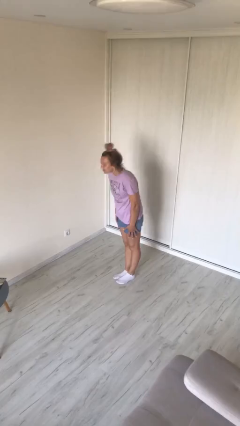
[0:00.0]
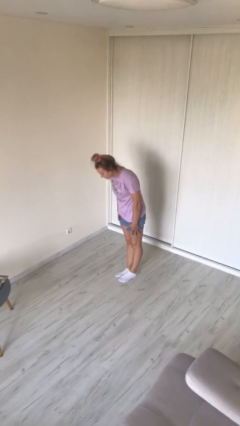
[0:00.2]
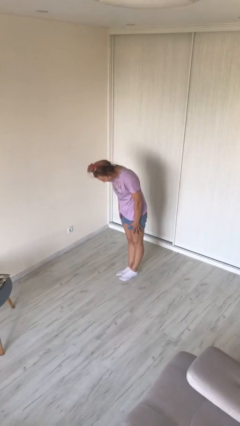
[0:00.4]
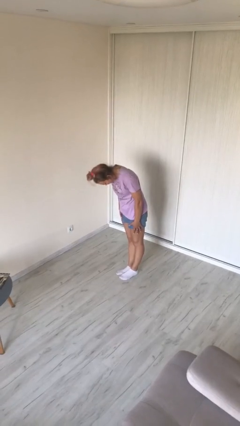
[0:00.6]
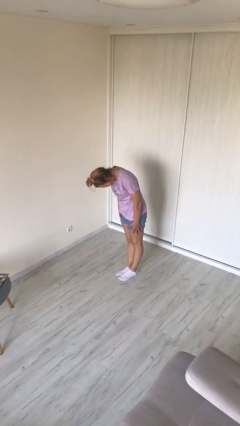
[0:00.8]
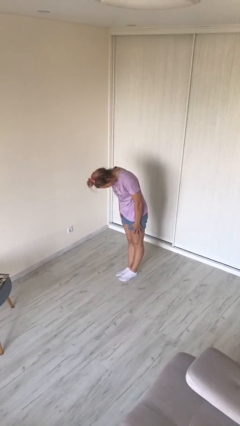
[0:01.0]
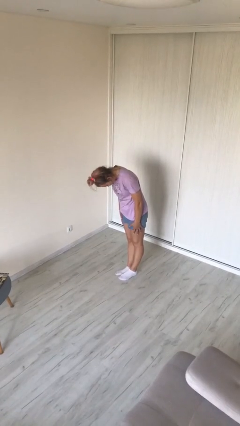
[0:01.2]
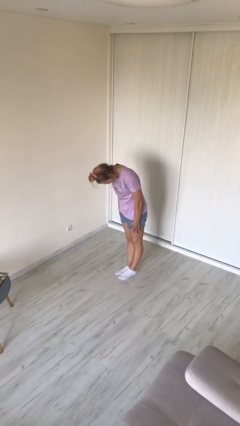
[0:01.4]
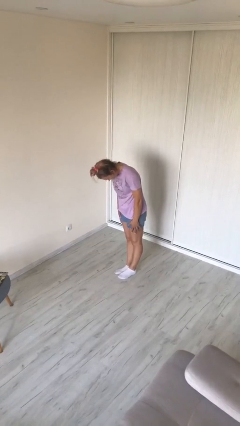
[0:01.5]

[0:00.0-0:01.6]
person bows

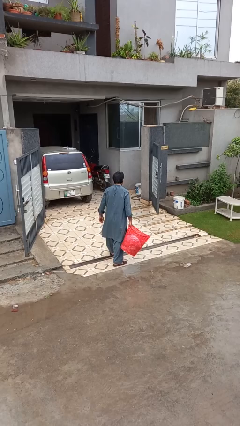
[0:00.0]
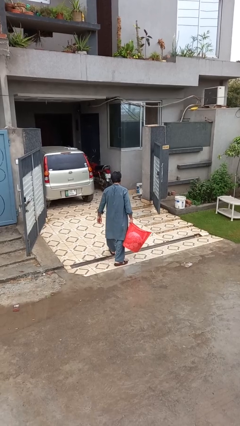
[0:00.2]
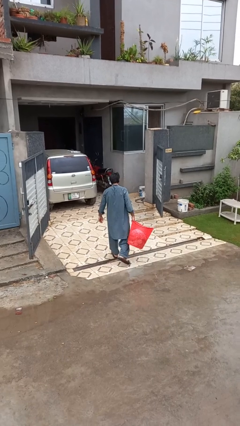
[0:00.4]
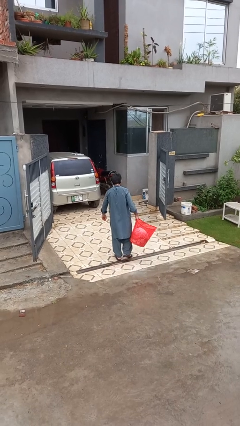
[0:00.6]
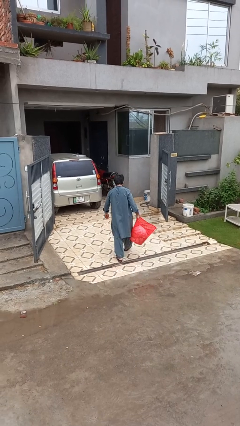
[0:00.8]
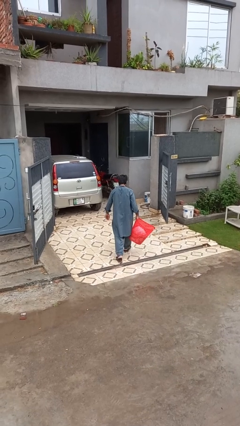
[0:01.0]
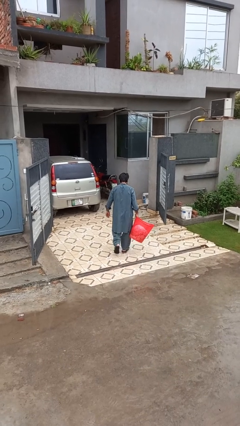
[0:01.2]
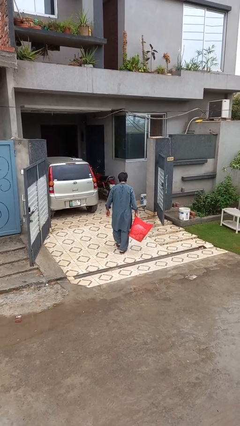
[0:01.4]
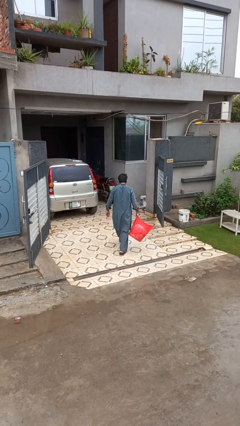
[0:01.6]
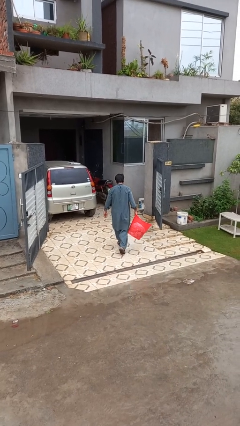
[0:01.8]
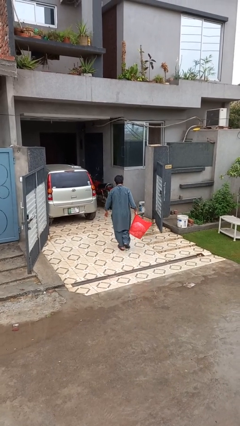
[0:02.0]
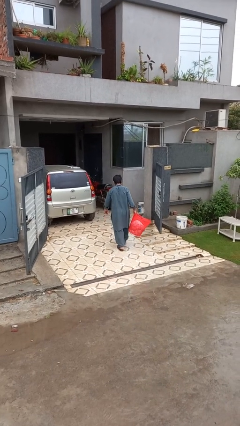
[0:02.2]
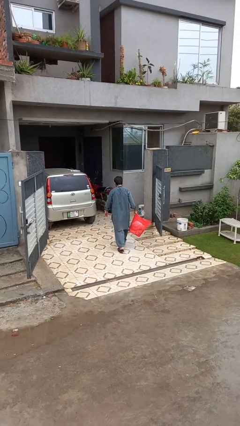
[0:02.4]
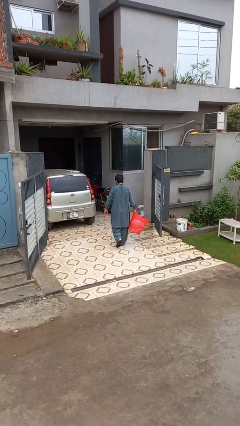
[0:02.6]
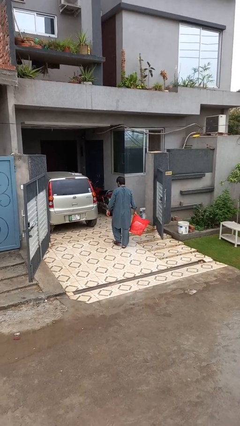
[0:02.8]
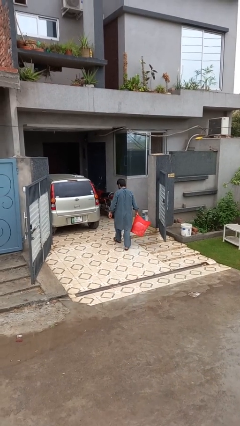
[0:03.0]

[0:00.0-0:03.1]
person carries laundry basket

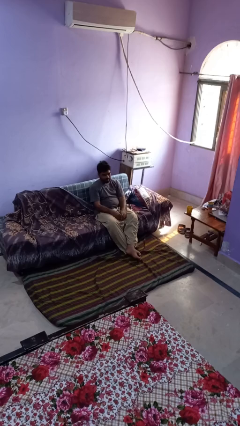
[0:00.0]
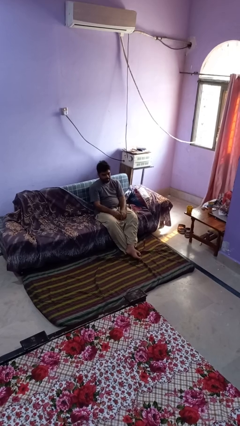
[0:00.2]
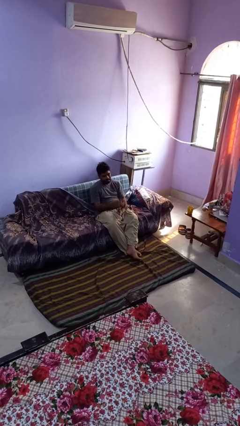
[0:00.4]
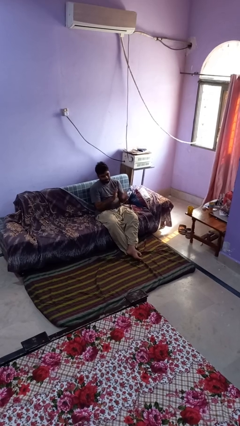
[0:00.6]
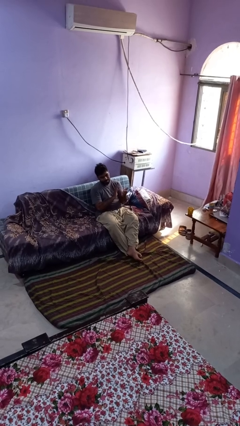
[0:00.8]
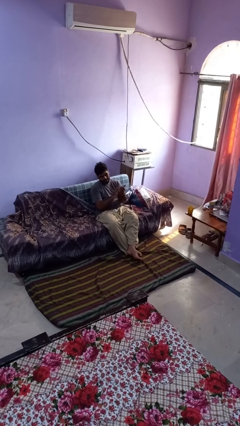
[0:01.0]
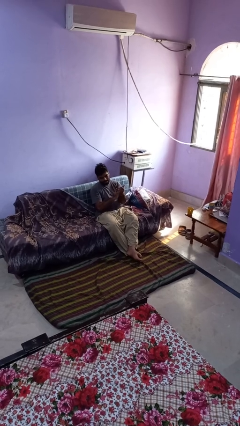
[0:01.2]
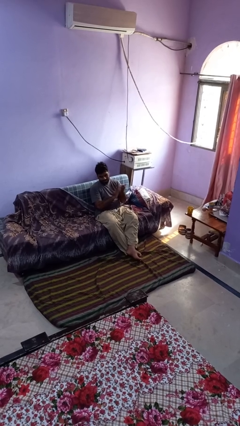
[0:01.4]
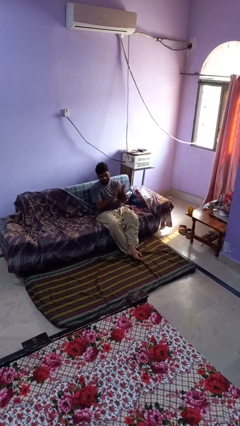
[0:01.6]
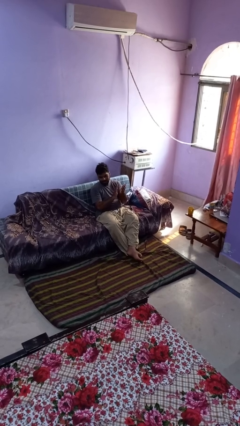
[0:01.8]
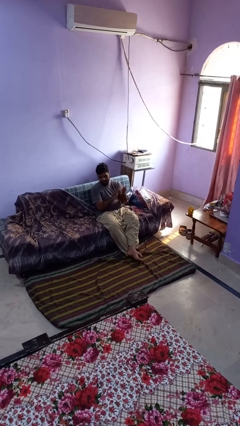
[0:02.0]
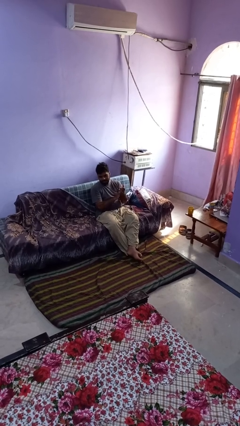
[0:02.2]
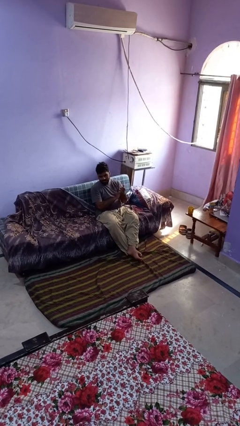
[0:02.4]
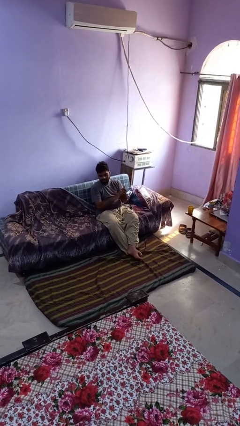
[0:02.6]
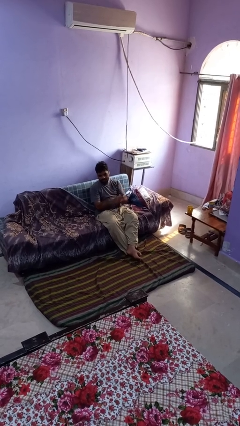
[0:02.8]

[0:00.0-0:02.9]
person claps hands

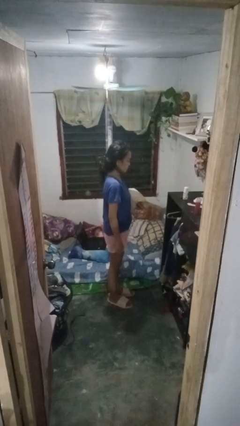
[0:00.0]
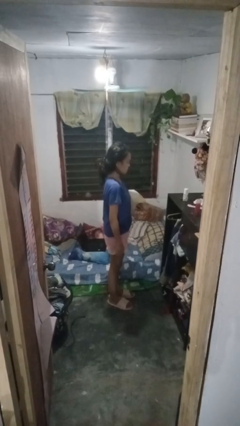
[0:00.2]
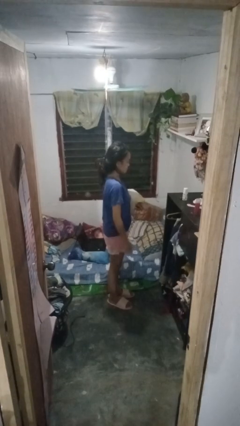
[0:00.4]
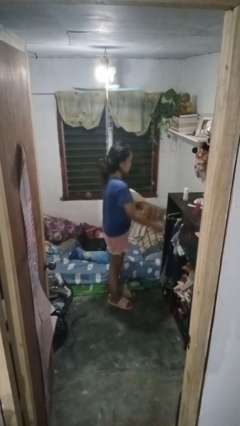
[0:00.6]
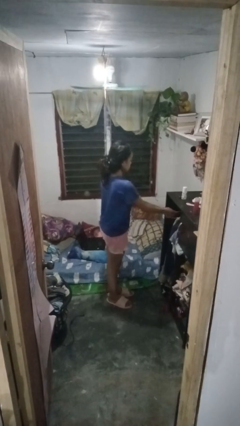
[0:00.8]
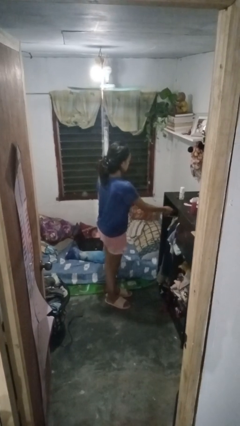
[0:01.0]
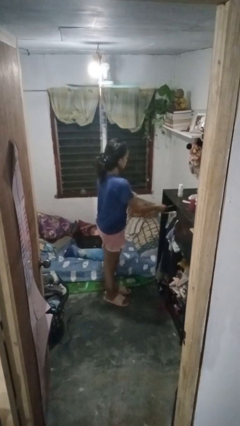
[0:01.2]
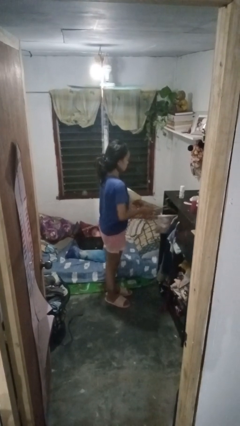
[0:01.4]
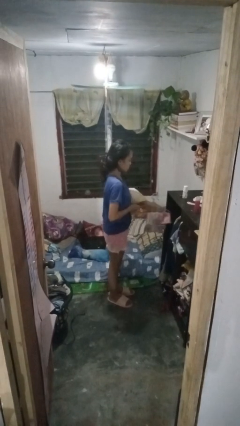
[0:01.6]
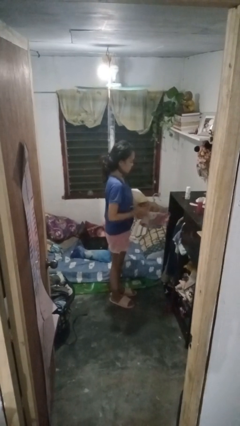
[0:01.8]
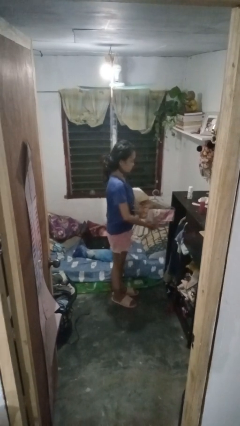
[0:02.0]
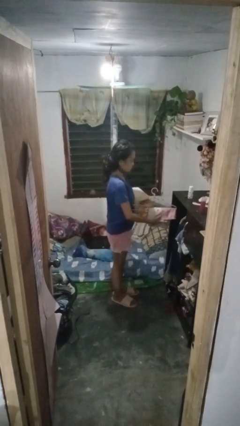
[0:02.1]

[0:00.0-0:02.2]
person takes clothes from closet

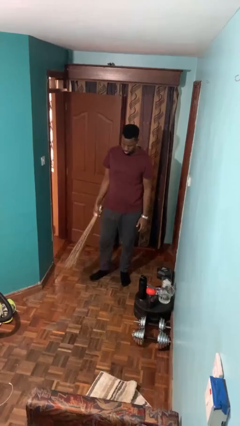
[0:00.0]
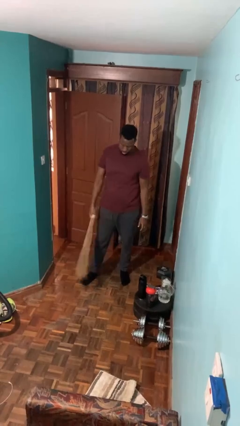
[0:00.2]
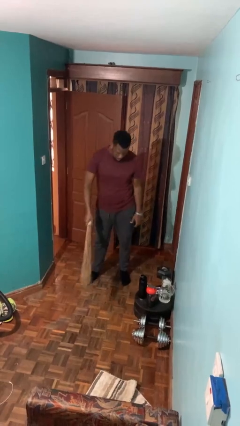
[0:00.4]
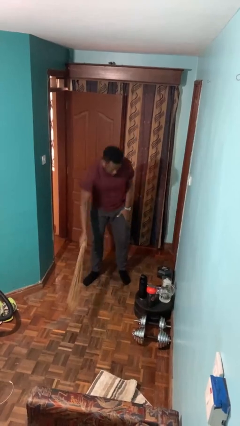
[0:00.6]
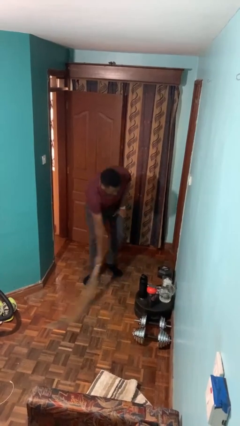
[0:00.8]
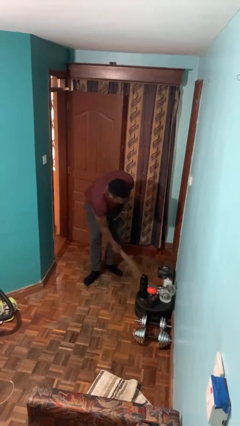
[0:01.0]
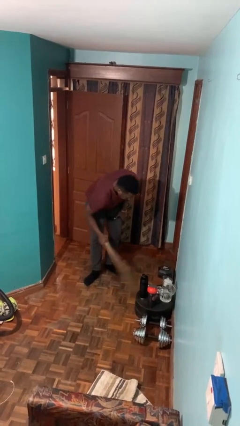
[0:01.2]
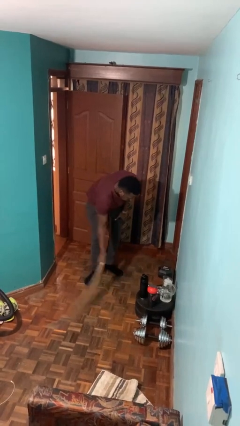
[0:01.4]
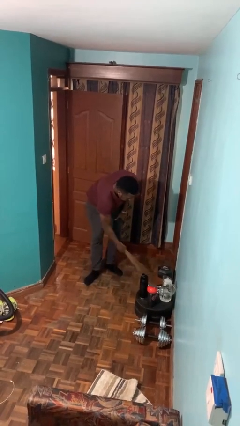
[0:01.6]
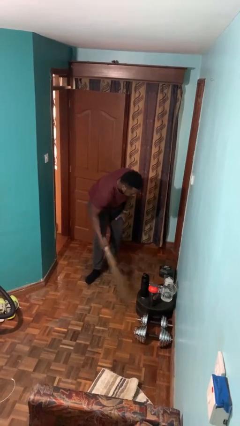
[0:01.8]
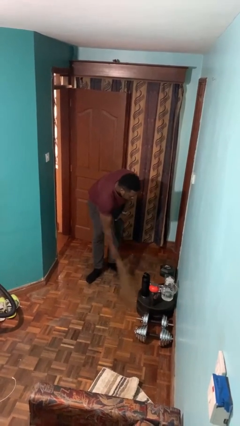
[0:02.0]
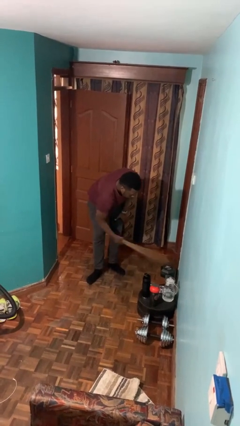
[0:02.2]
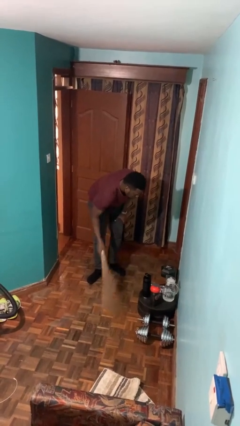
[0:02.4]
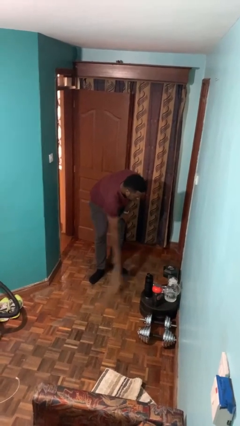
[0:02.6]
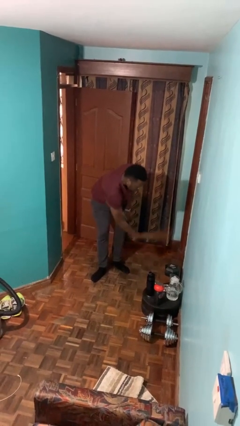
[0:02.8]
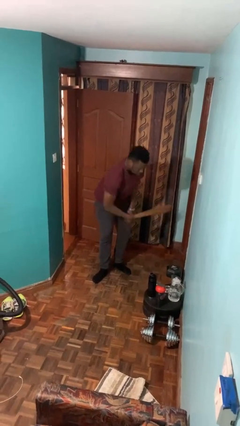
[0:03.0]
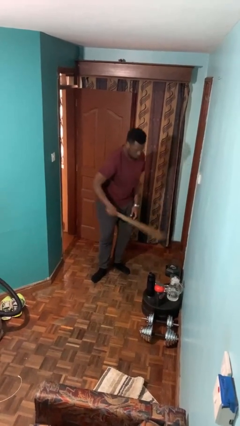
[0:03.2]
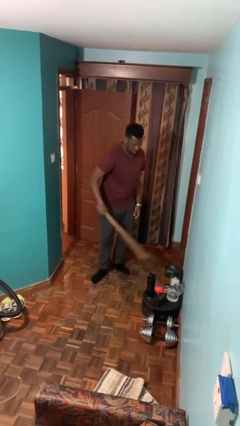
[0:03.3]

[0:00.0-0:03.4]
person sweeps floor

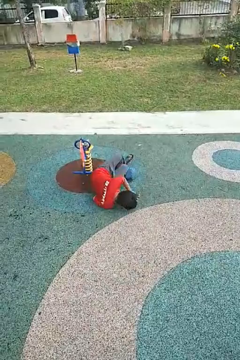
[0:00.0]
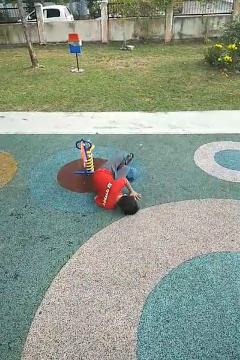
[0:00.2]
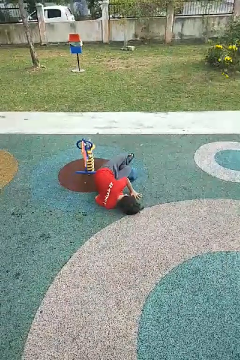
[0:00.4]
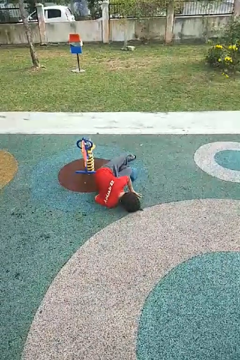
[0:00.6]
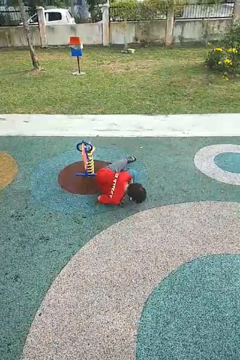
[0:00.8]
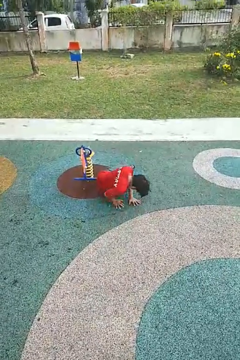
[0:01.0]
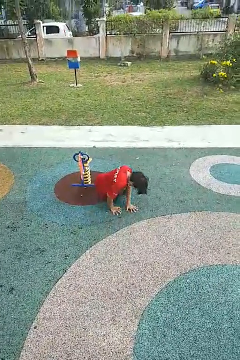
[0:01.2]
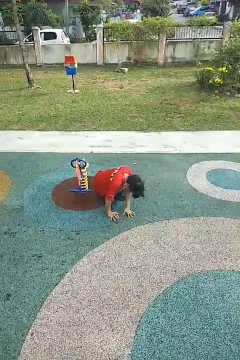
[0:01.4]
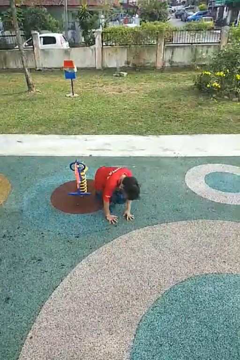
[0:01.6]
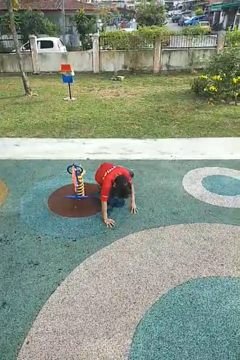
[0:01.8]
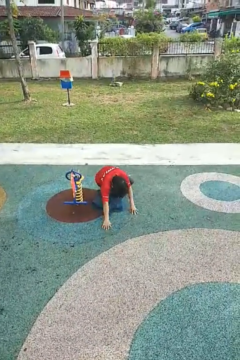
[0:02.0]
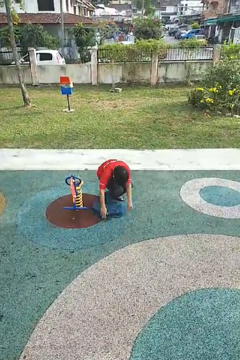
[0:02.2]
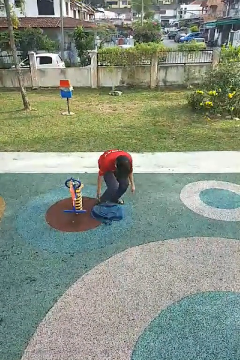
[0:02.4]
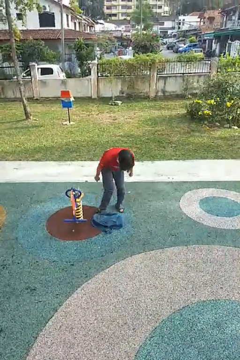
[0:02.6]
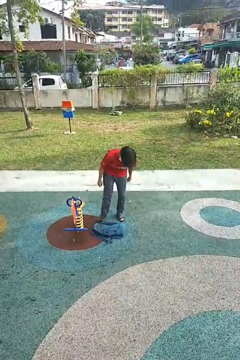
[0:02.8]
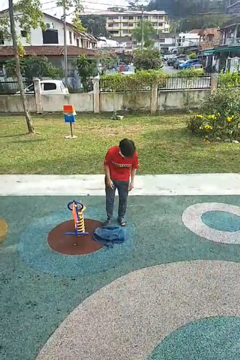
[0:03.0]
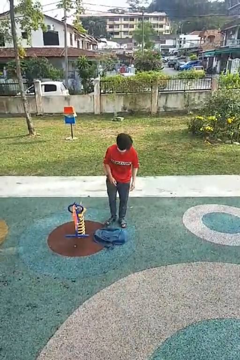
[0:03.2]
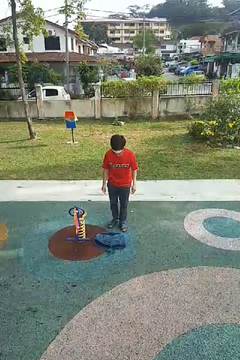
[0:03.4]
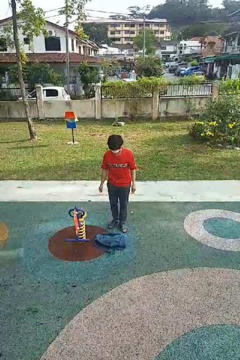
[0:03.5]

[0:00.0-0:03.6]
person stands up from floor

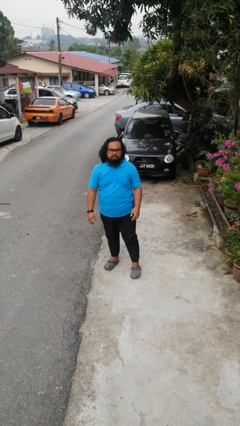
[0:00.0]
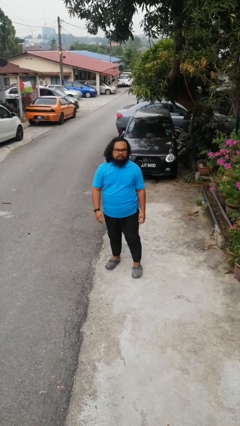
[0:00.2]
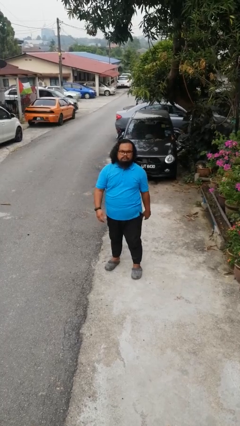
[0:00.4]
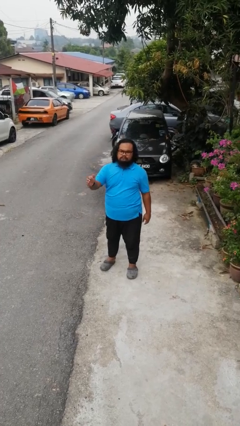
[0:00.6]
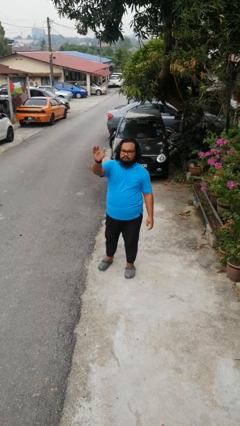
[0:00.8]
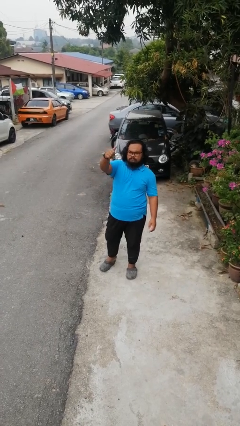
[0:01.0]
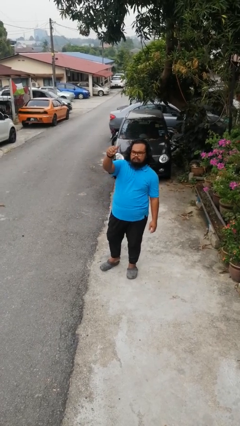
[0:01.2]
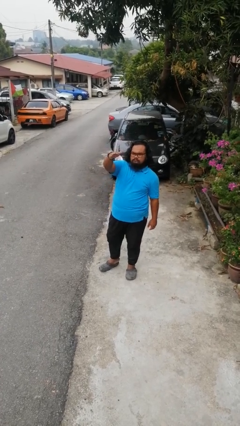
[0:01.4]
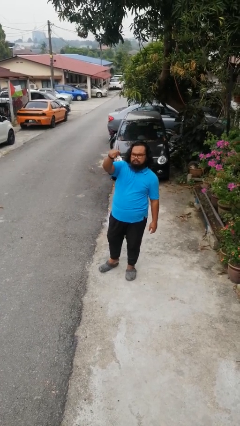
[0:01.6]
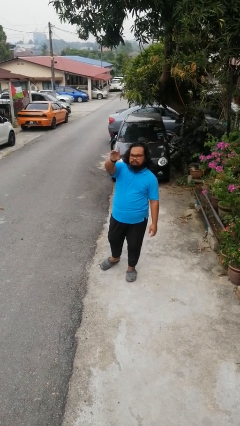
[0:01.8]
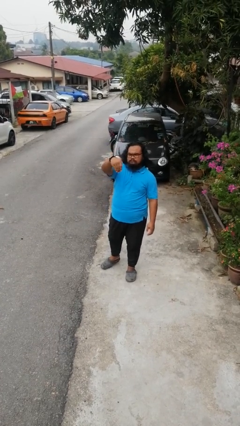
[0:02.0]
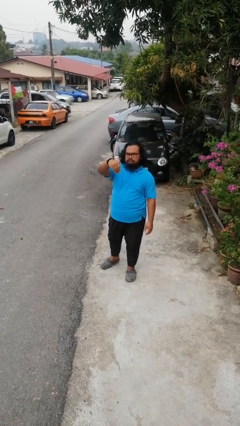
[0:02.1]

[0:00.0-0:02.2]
person gestures come here
